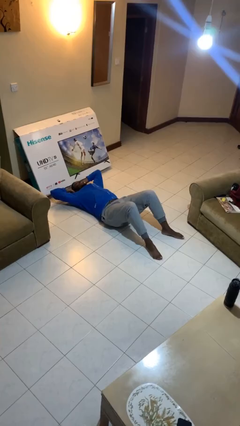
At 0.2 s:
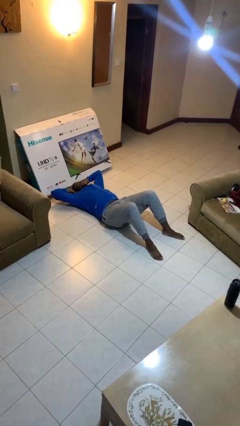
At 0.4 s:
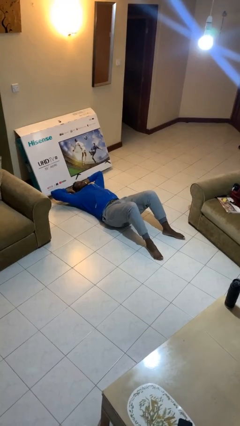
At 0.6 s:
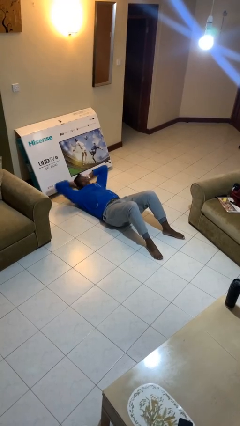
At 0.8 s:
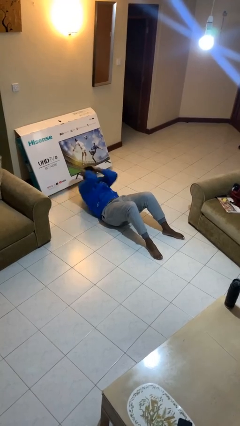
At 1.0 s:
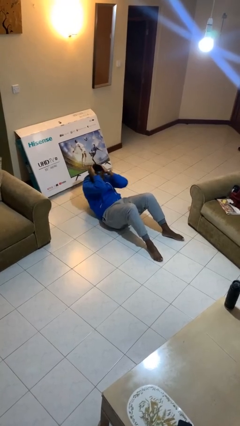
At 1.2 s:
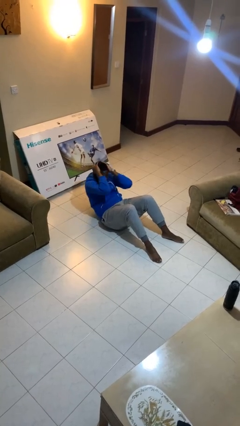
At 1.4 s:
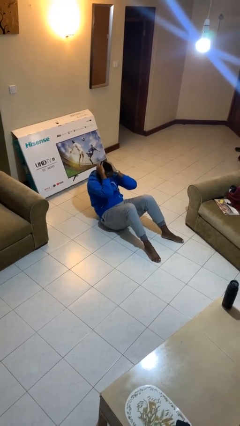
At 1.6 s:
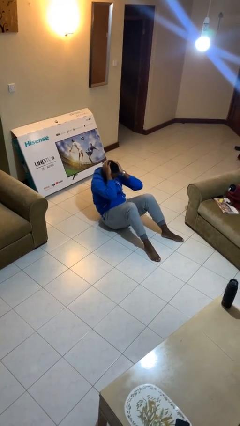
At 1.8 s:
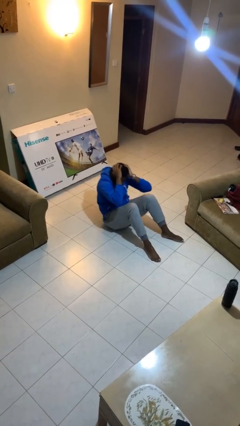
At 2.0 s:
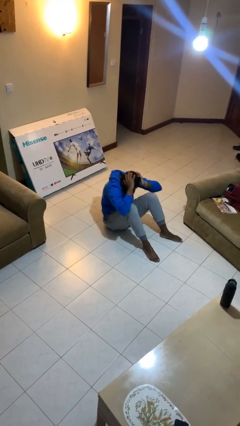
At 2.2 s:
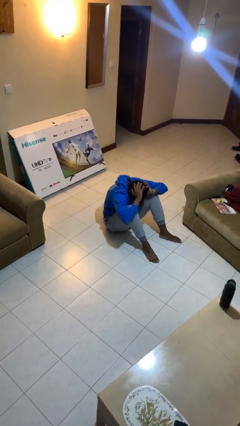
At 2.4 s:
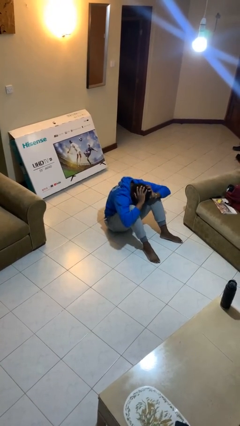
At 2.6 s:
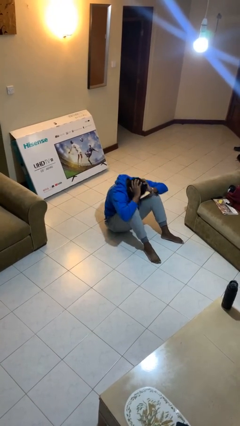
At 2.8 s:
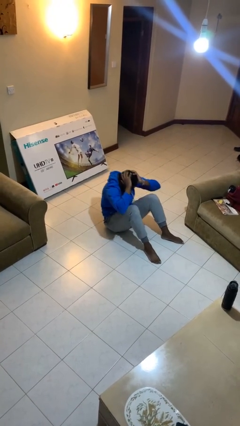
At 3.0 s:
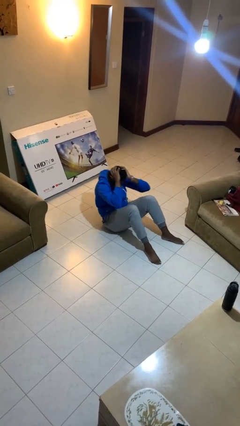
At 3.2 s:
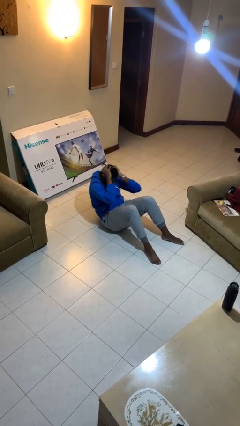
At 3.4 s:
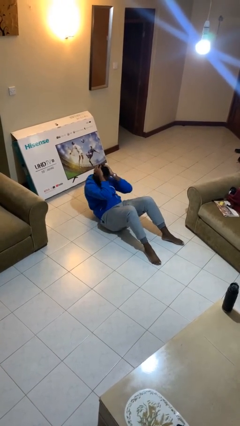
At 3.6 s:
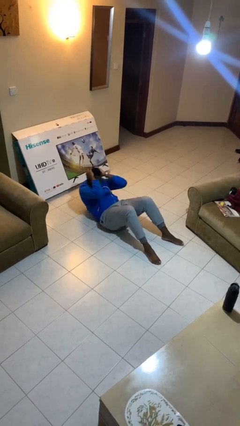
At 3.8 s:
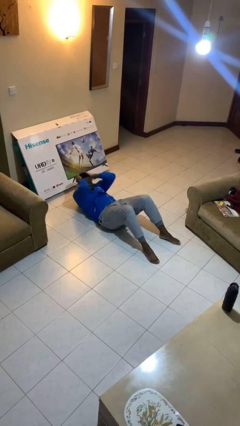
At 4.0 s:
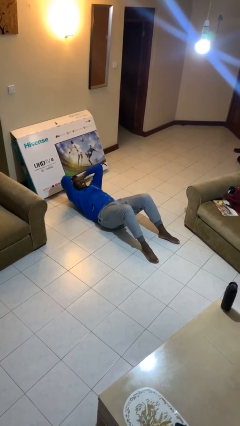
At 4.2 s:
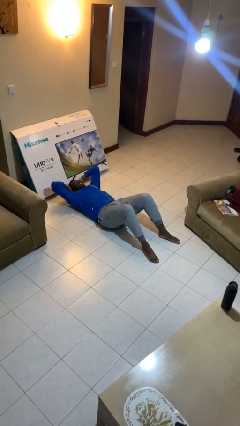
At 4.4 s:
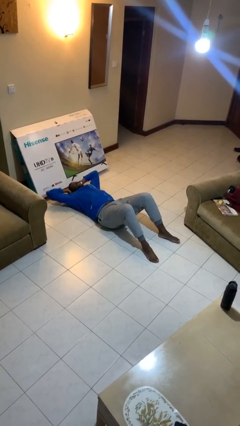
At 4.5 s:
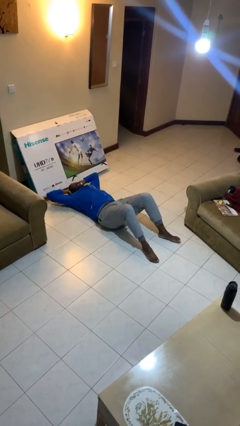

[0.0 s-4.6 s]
person exercises with situp

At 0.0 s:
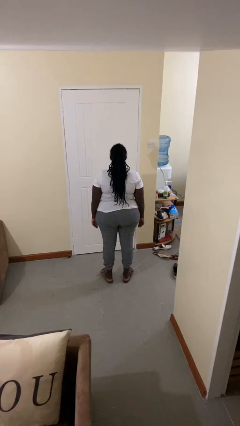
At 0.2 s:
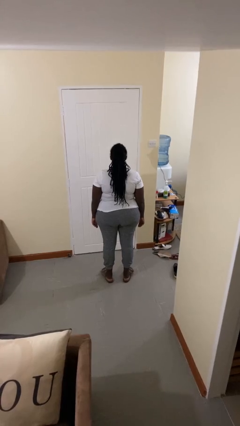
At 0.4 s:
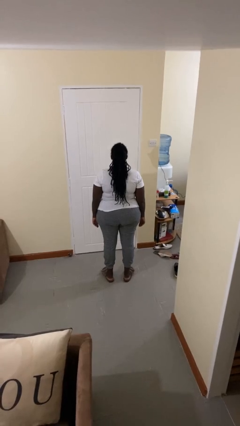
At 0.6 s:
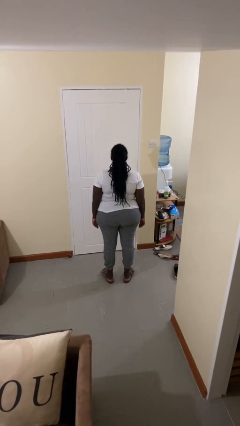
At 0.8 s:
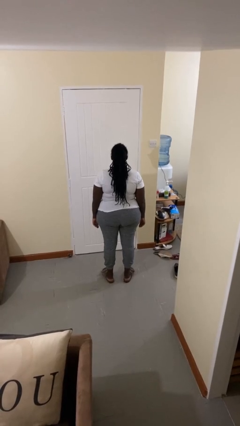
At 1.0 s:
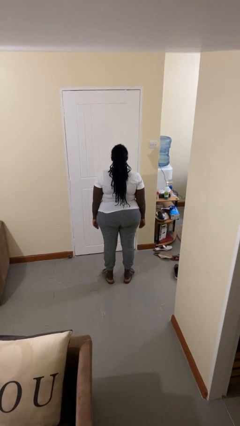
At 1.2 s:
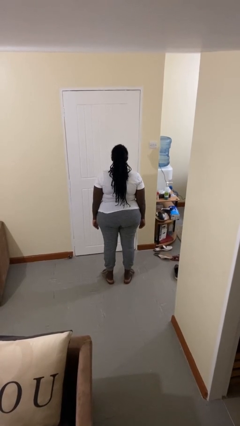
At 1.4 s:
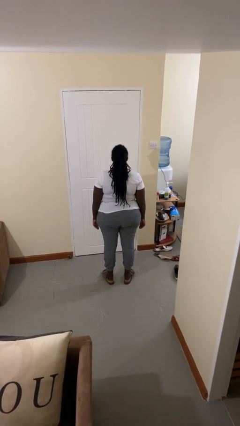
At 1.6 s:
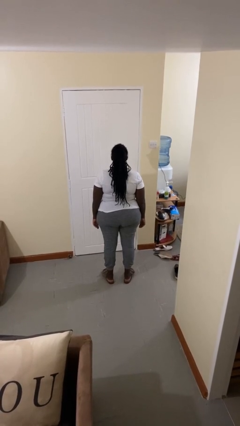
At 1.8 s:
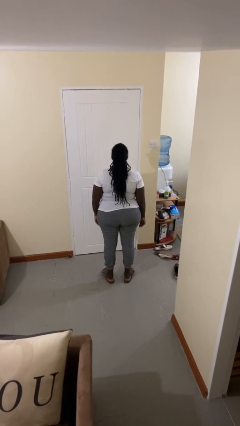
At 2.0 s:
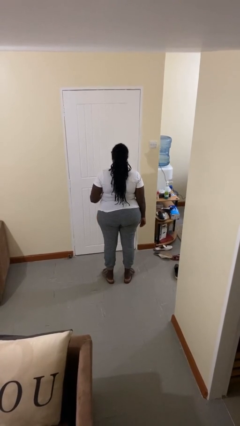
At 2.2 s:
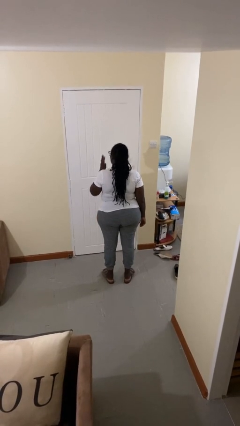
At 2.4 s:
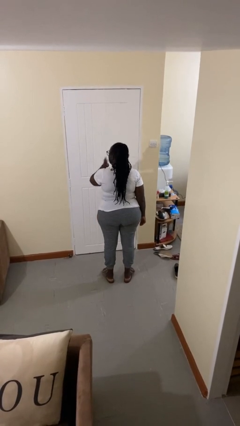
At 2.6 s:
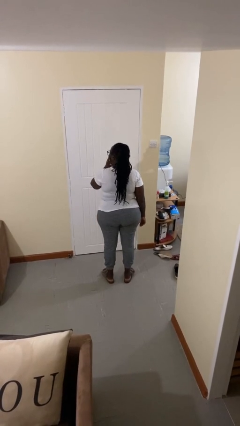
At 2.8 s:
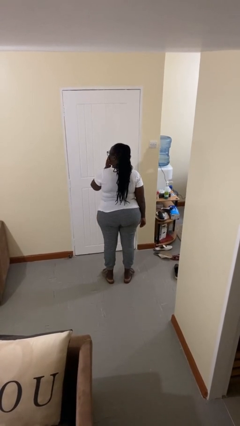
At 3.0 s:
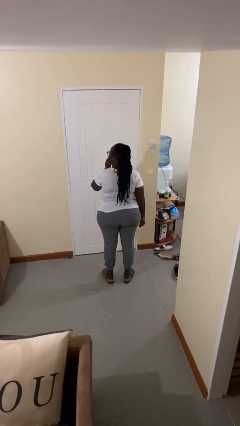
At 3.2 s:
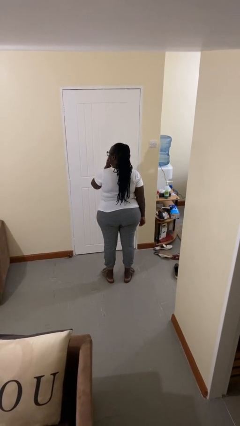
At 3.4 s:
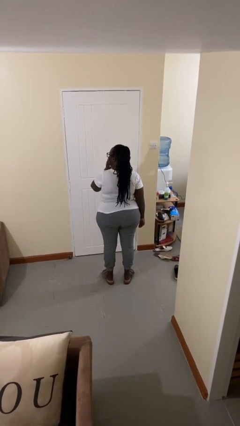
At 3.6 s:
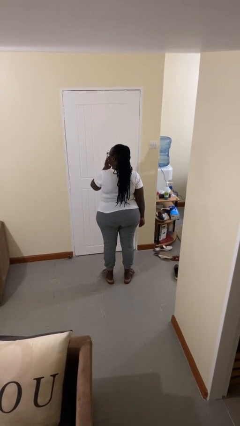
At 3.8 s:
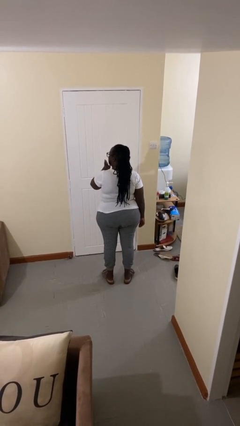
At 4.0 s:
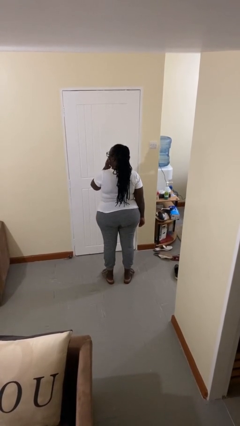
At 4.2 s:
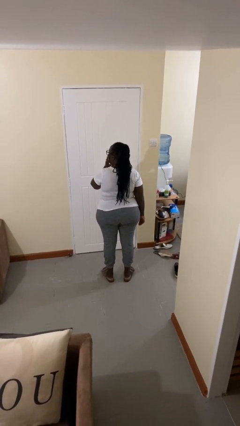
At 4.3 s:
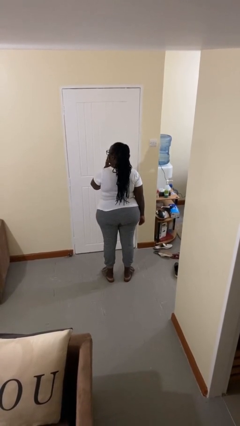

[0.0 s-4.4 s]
person swats bug

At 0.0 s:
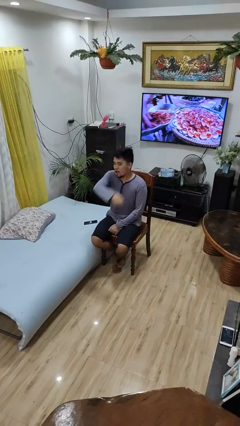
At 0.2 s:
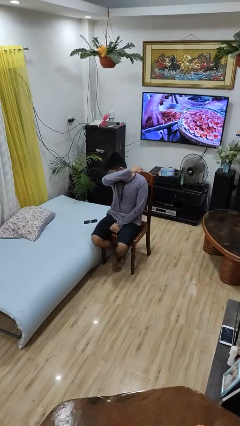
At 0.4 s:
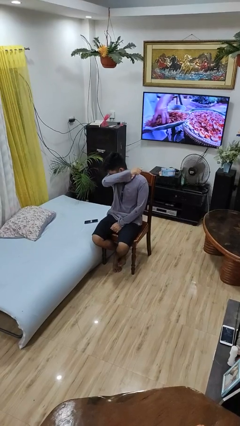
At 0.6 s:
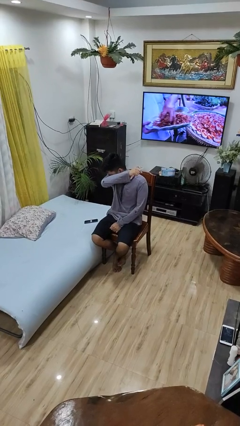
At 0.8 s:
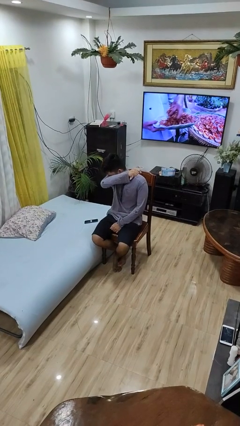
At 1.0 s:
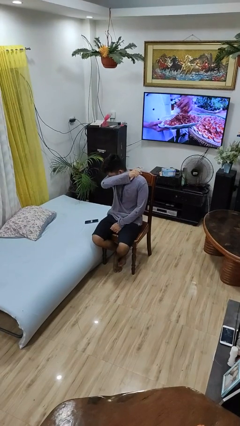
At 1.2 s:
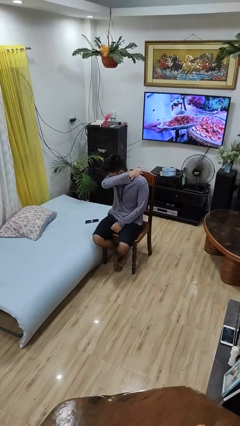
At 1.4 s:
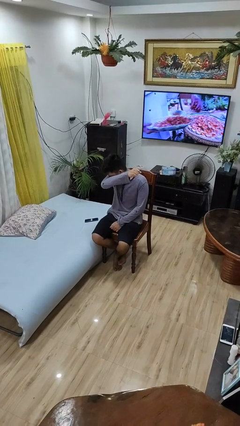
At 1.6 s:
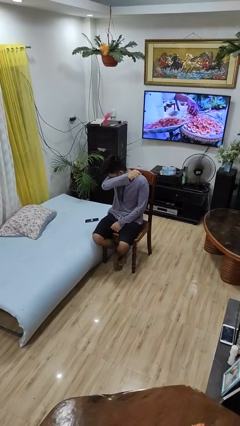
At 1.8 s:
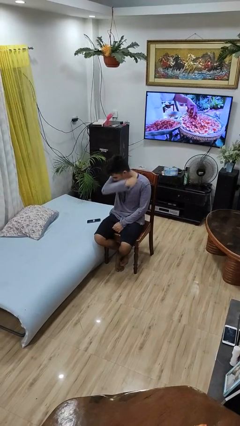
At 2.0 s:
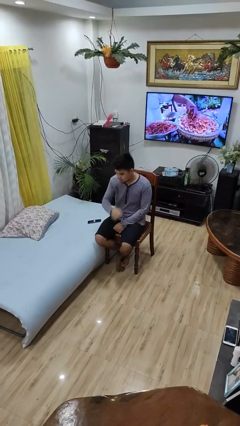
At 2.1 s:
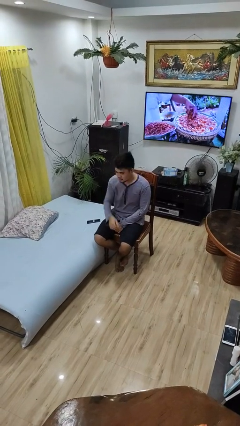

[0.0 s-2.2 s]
person sneezes into arm

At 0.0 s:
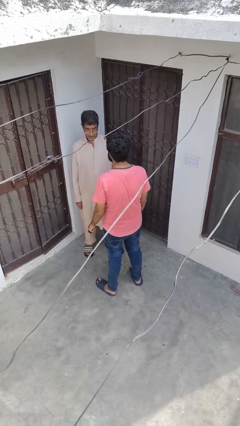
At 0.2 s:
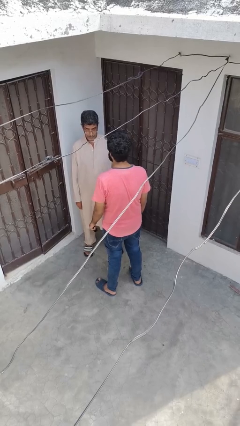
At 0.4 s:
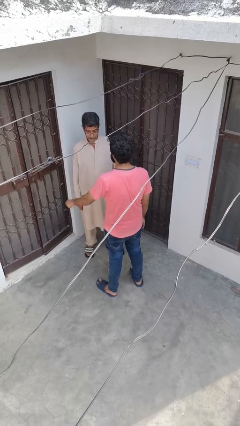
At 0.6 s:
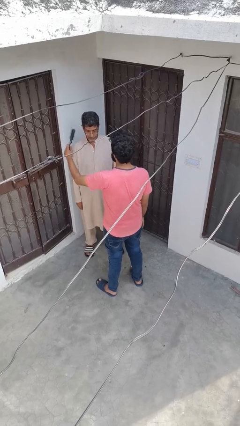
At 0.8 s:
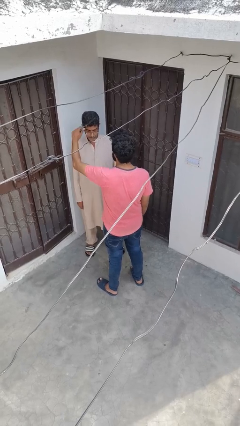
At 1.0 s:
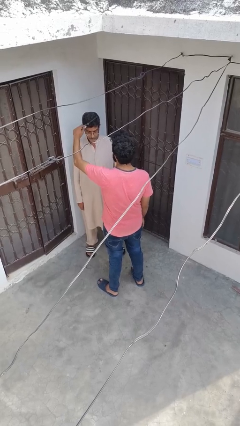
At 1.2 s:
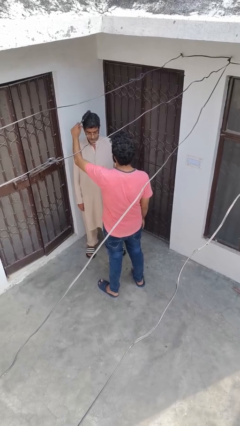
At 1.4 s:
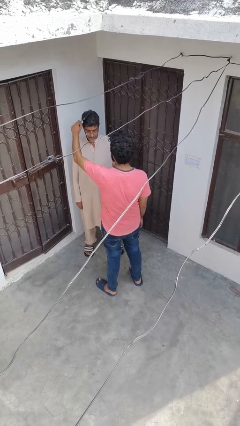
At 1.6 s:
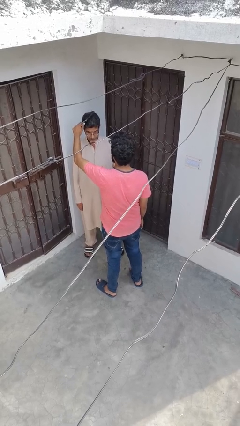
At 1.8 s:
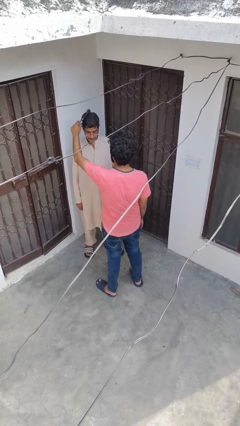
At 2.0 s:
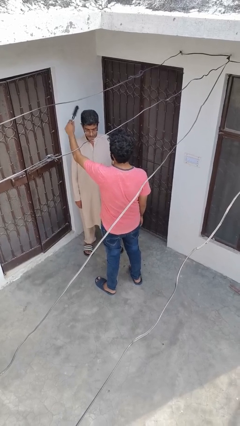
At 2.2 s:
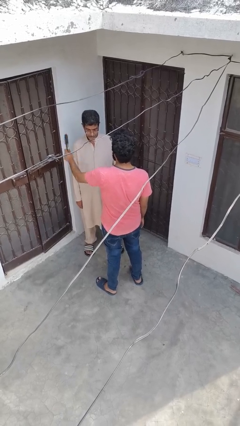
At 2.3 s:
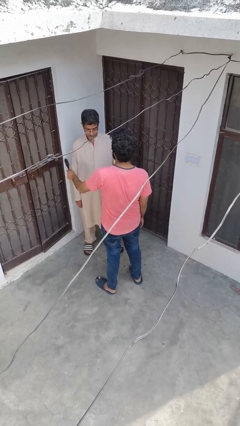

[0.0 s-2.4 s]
person brushes hair of person

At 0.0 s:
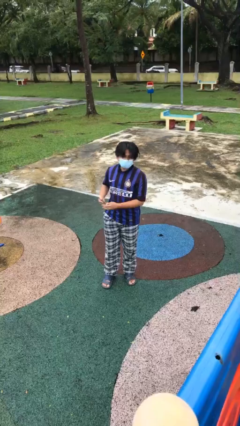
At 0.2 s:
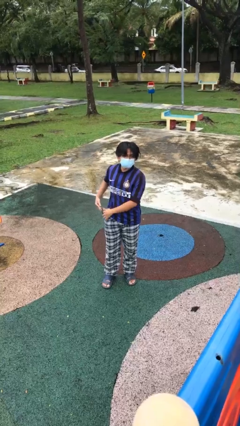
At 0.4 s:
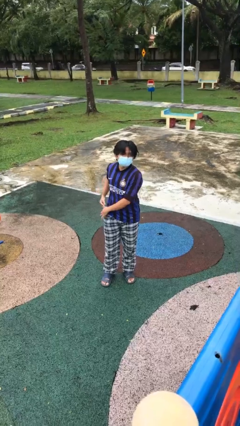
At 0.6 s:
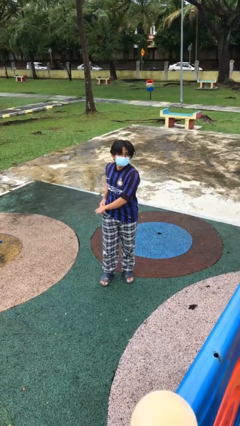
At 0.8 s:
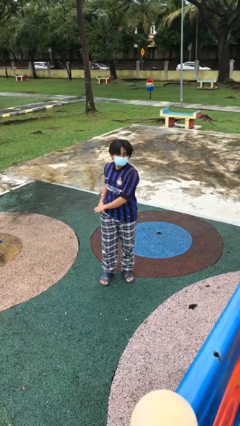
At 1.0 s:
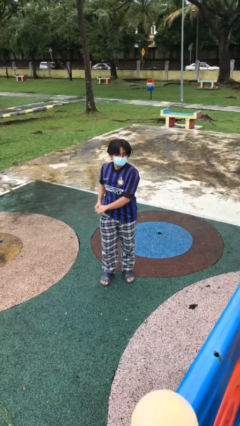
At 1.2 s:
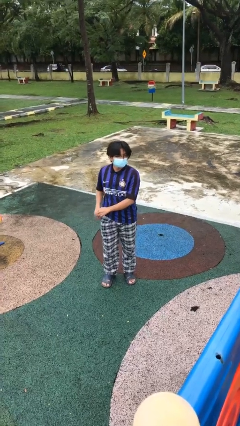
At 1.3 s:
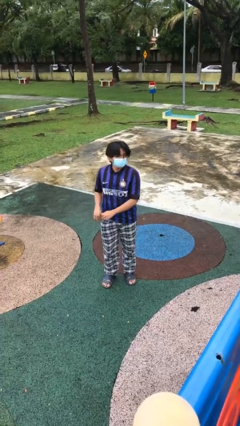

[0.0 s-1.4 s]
person puts phone into pocket

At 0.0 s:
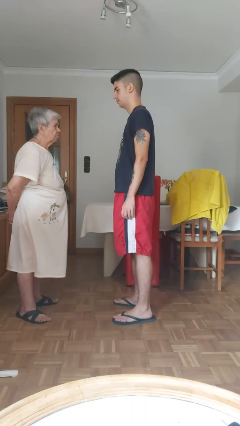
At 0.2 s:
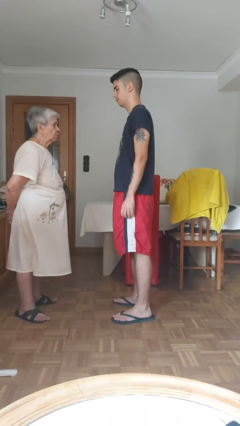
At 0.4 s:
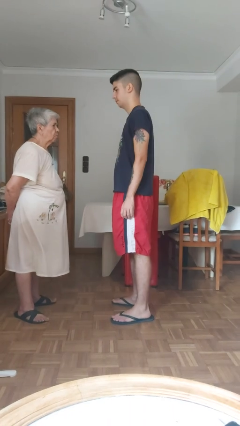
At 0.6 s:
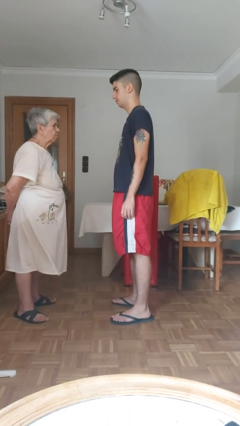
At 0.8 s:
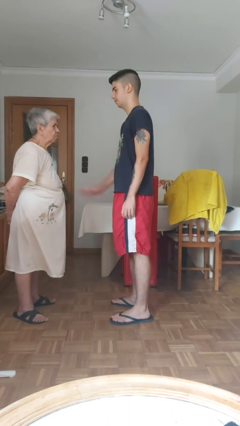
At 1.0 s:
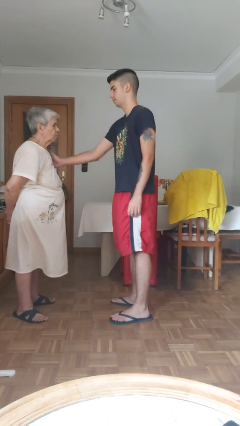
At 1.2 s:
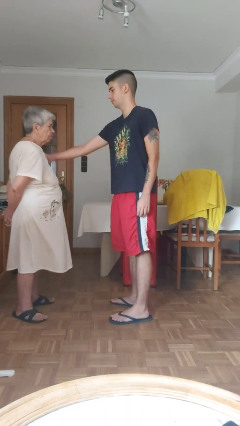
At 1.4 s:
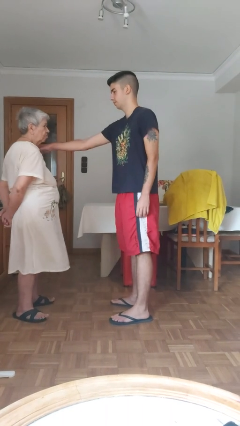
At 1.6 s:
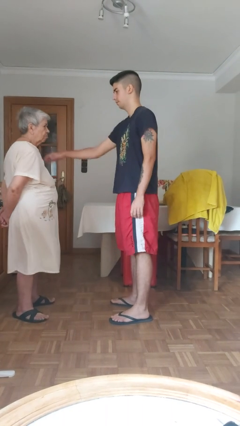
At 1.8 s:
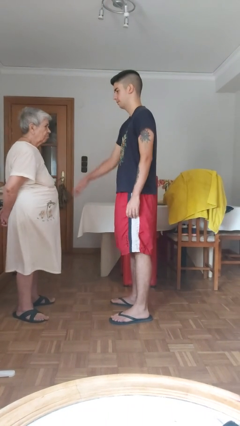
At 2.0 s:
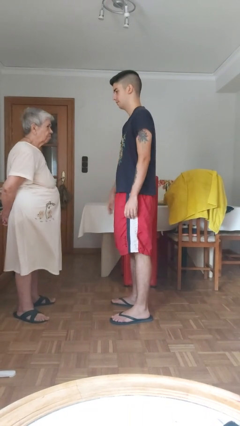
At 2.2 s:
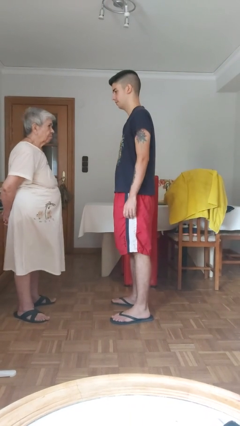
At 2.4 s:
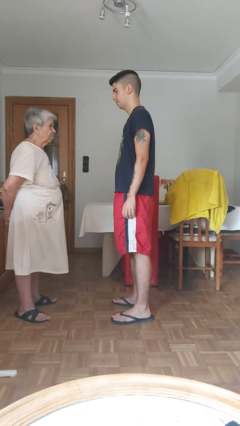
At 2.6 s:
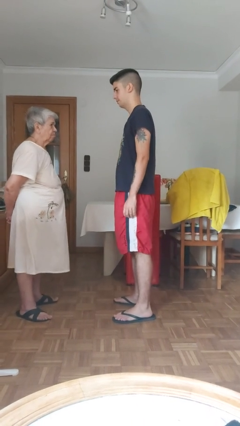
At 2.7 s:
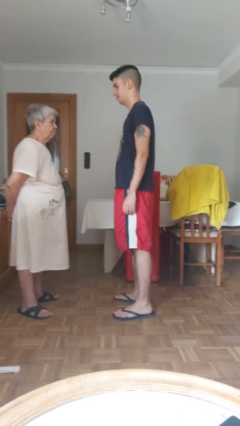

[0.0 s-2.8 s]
person shoves person
